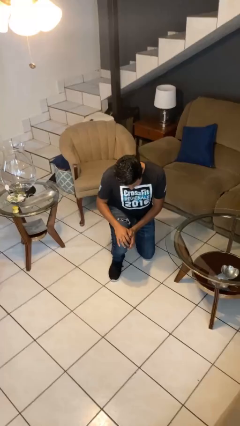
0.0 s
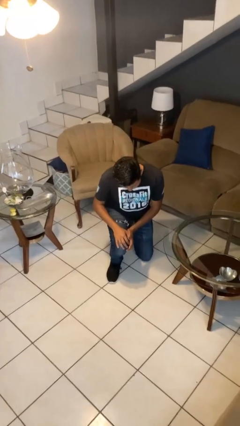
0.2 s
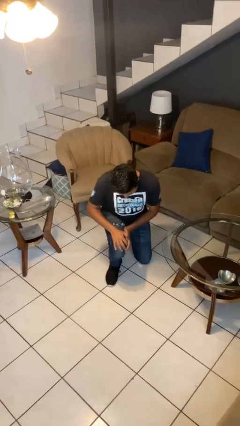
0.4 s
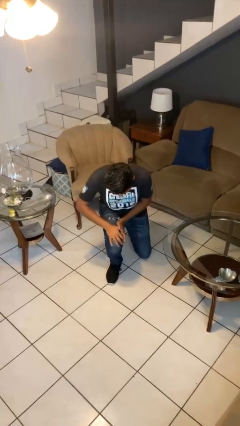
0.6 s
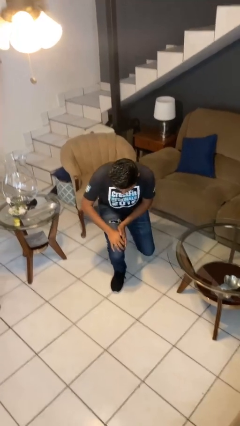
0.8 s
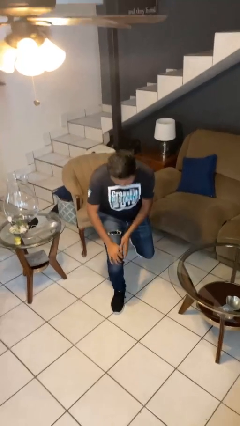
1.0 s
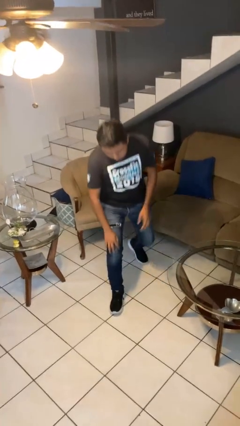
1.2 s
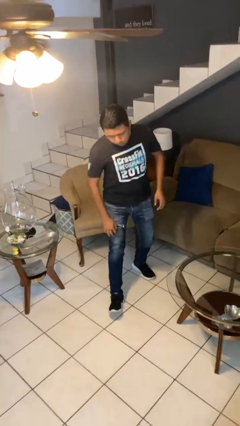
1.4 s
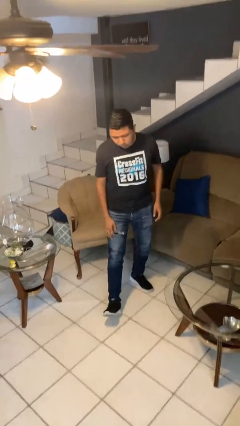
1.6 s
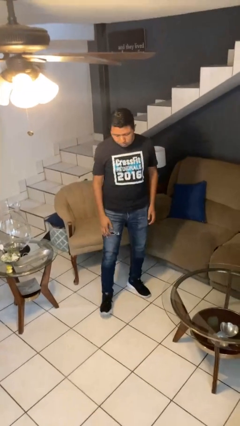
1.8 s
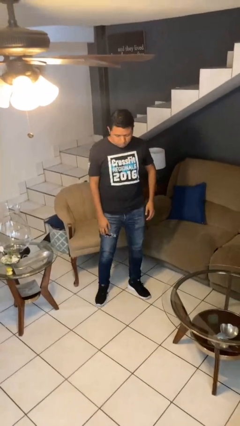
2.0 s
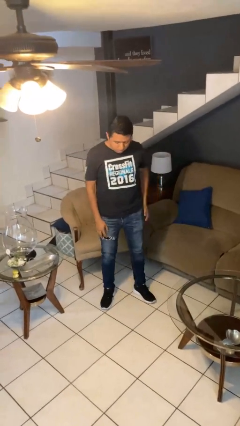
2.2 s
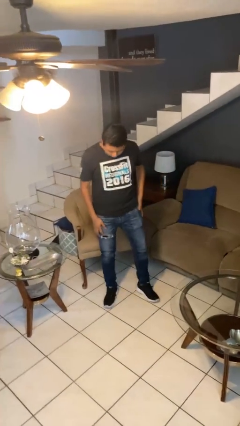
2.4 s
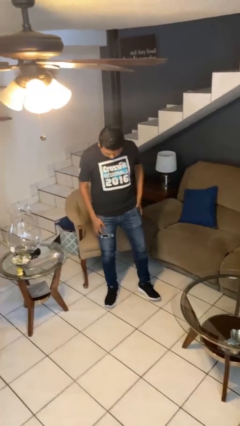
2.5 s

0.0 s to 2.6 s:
person stands up from floor

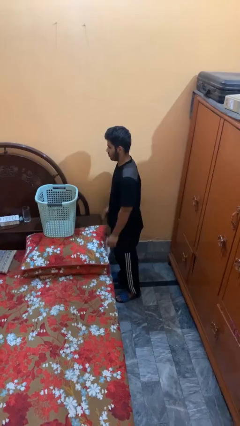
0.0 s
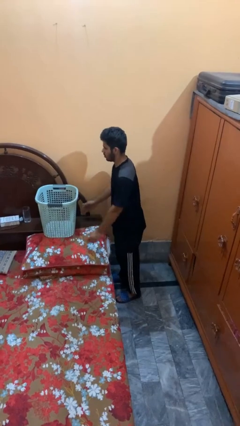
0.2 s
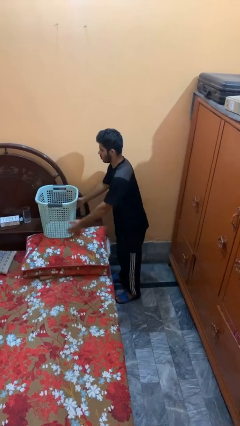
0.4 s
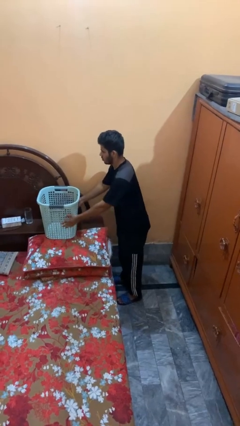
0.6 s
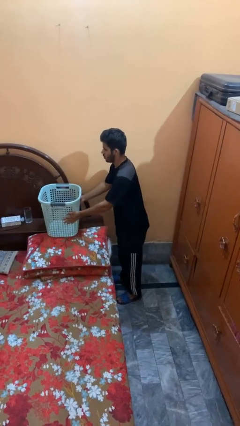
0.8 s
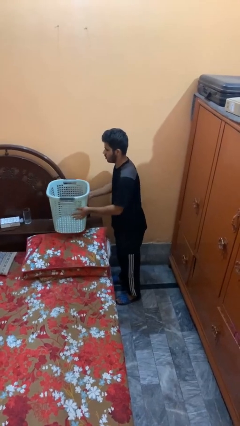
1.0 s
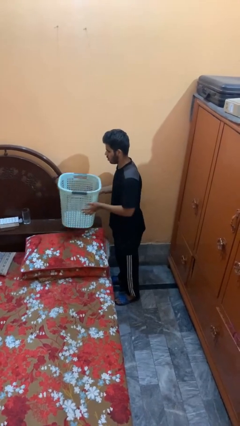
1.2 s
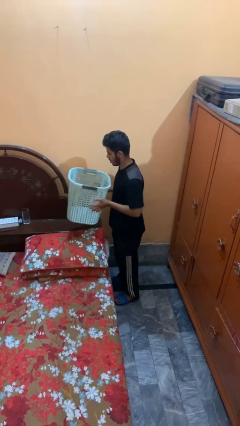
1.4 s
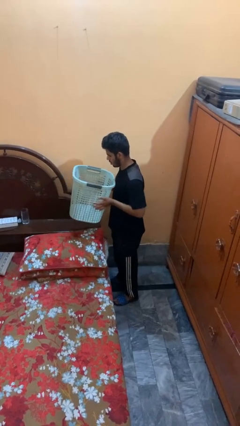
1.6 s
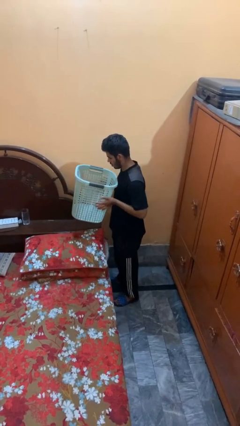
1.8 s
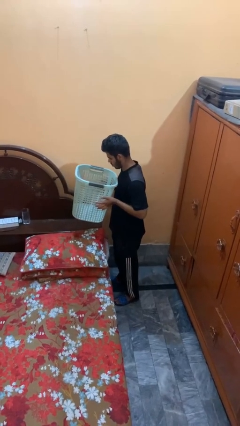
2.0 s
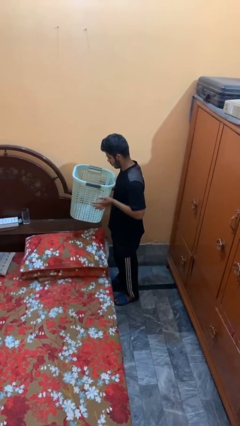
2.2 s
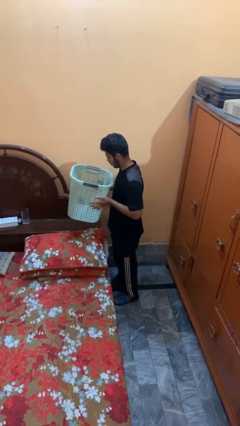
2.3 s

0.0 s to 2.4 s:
person picks up object from bed

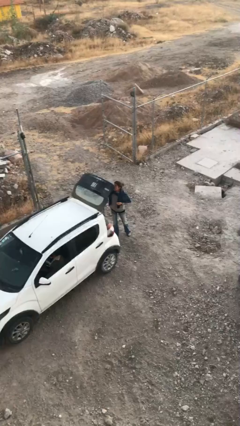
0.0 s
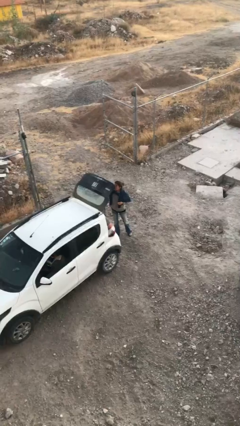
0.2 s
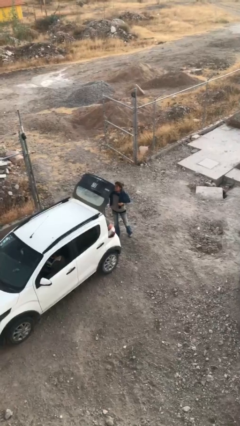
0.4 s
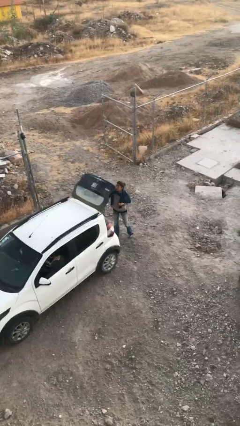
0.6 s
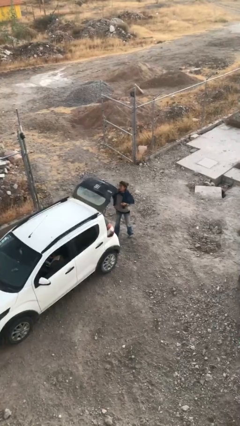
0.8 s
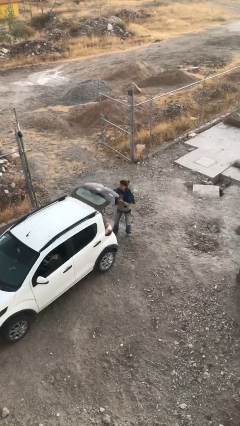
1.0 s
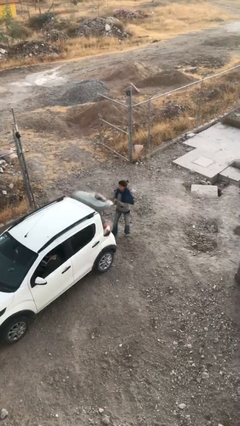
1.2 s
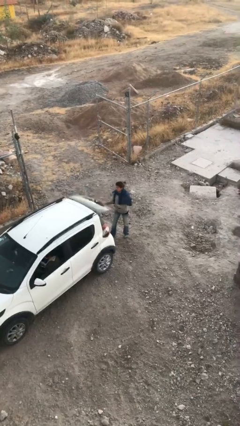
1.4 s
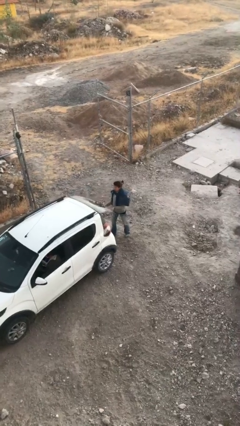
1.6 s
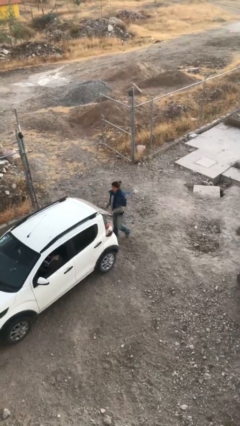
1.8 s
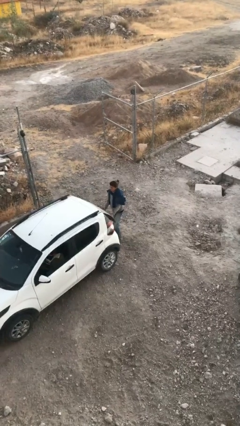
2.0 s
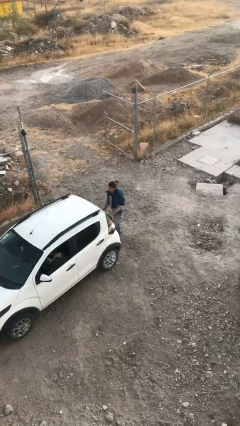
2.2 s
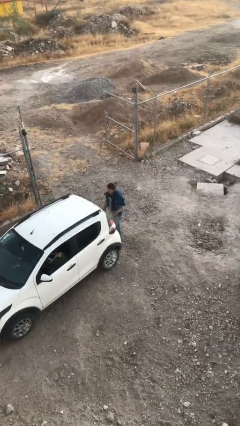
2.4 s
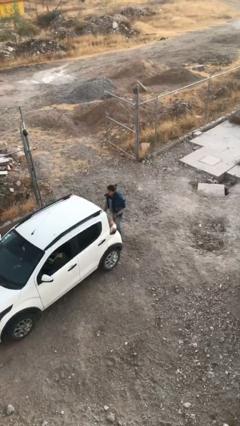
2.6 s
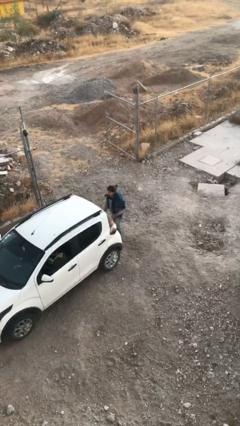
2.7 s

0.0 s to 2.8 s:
person closes car trunk

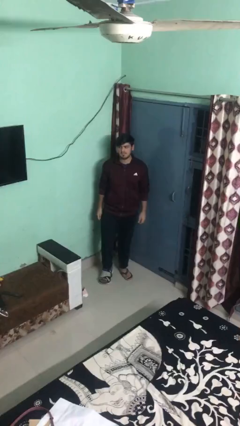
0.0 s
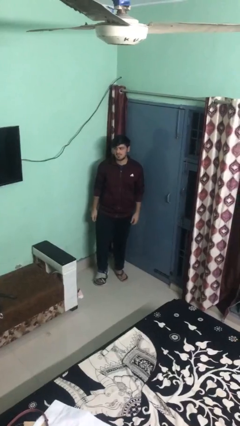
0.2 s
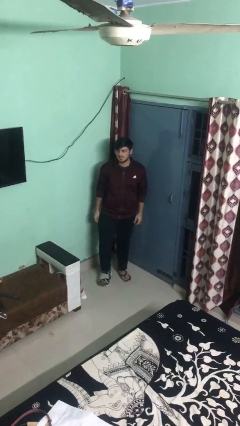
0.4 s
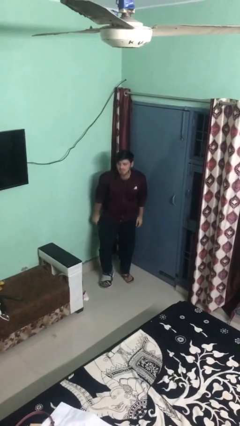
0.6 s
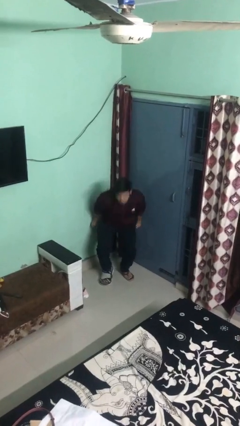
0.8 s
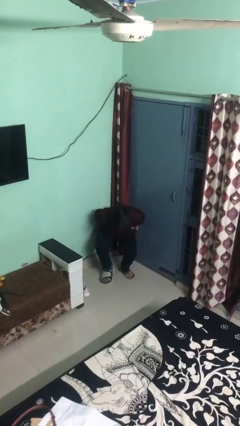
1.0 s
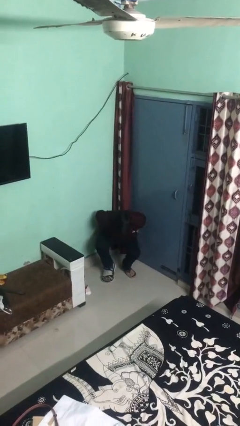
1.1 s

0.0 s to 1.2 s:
person sits down

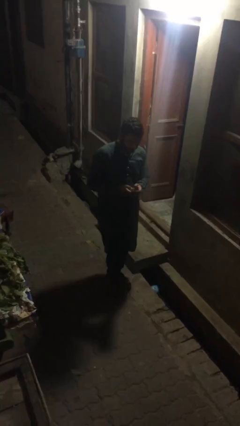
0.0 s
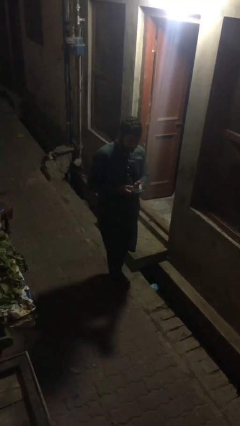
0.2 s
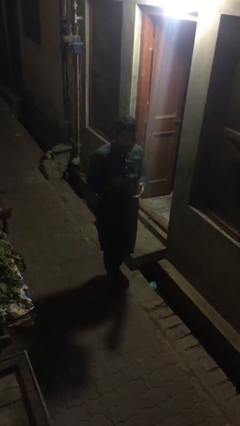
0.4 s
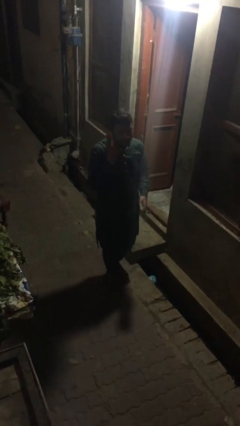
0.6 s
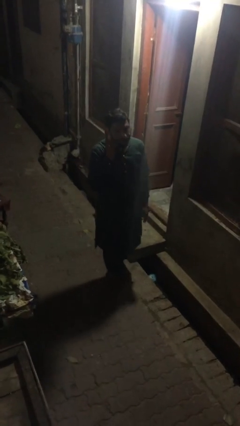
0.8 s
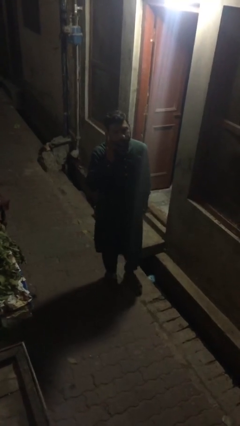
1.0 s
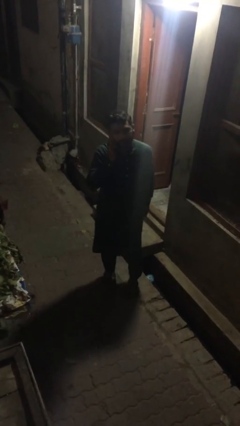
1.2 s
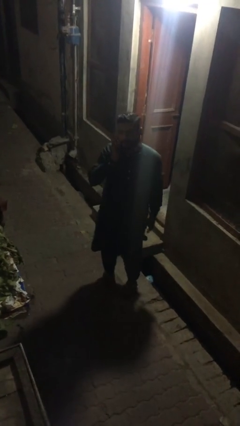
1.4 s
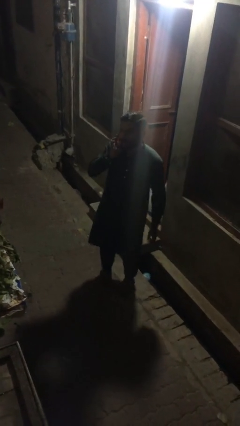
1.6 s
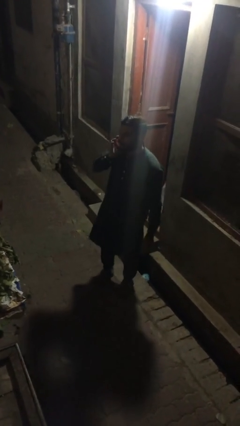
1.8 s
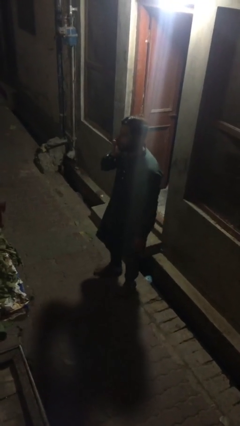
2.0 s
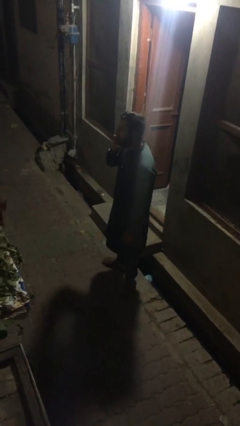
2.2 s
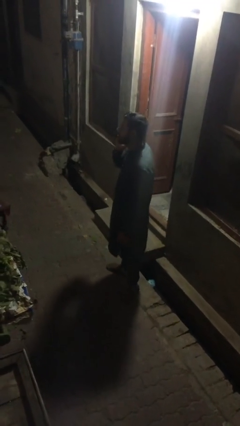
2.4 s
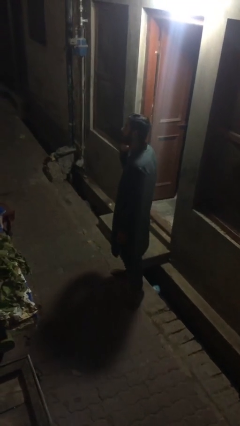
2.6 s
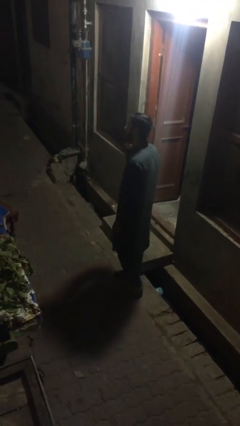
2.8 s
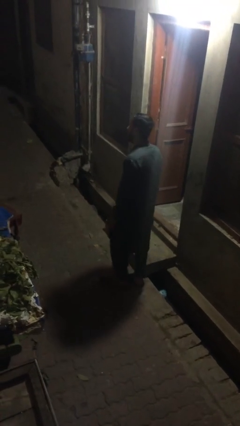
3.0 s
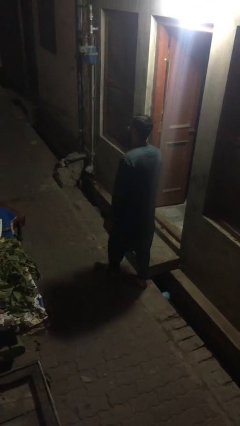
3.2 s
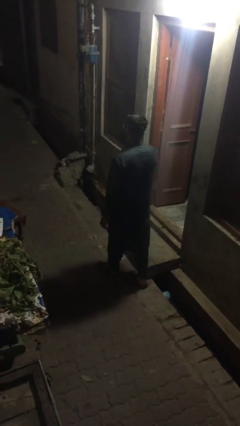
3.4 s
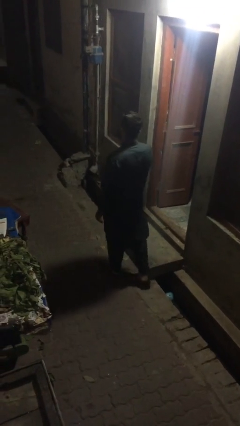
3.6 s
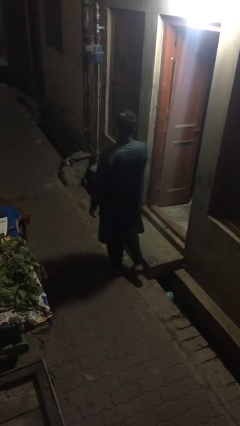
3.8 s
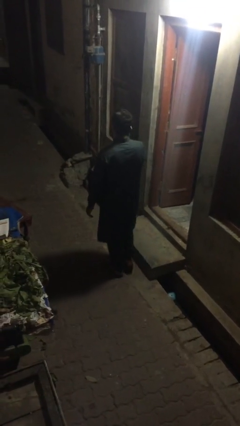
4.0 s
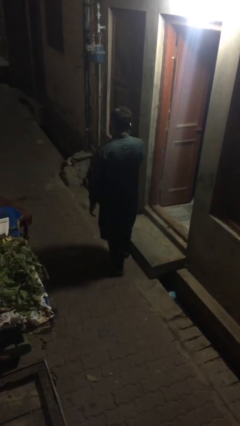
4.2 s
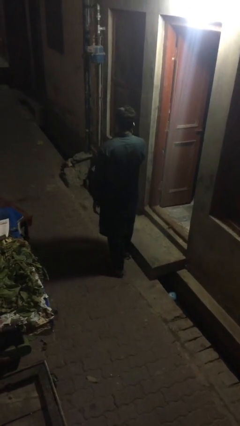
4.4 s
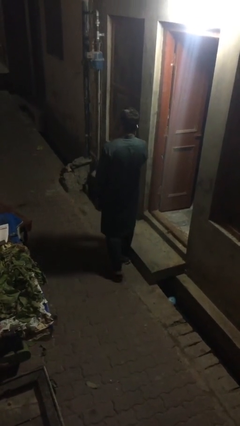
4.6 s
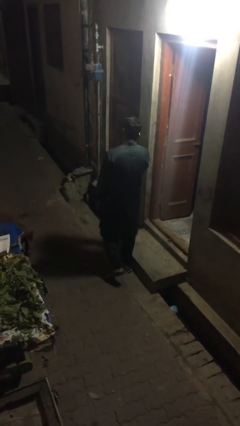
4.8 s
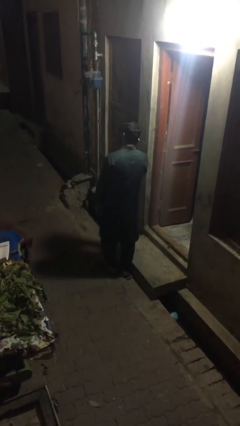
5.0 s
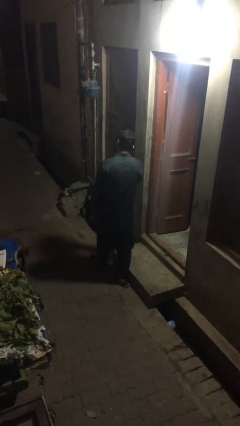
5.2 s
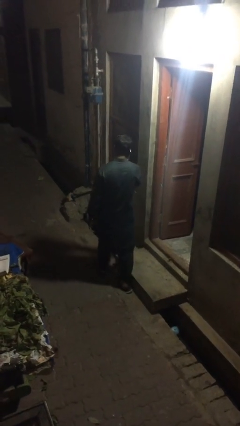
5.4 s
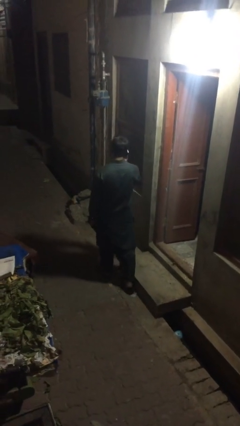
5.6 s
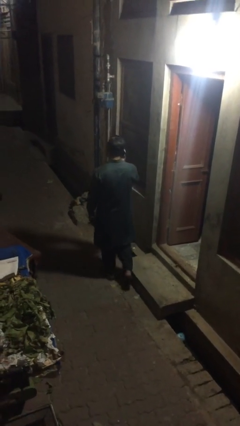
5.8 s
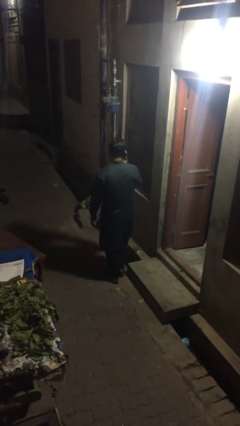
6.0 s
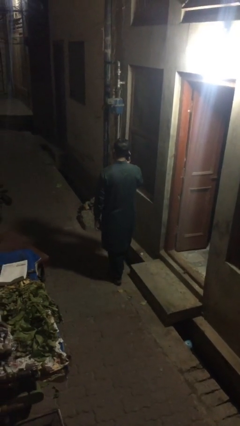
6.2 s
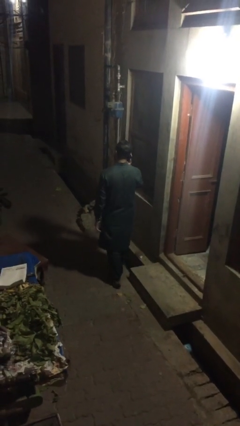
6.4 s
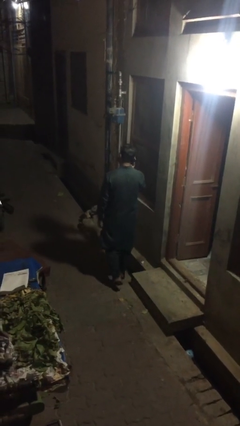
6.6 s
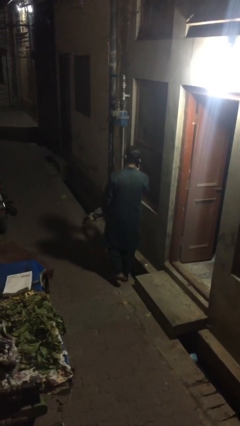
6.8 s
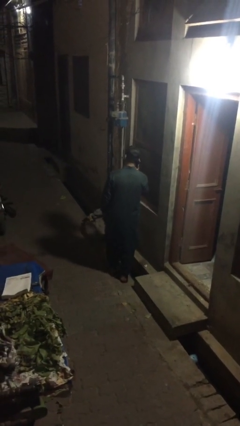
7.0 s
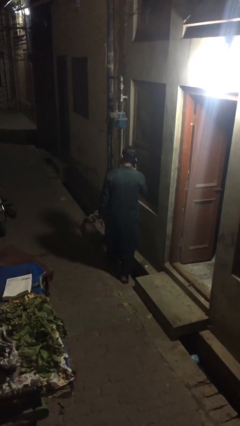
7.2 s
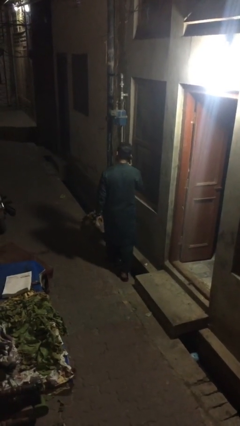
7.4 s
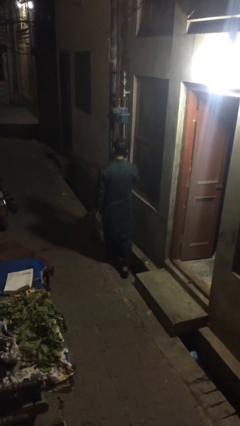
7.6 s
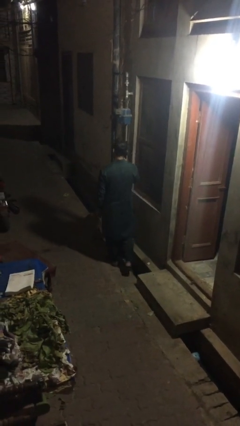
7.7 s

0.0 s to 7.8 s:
person talks on phone

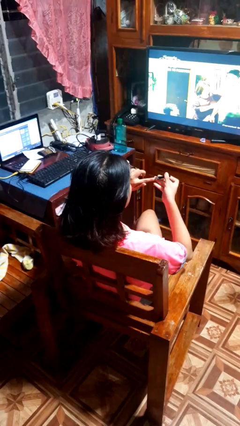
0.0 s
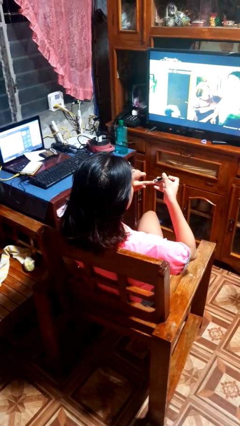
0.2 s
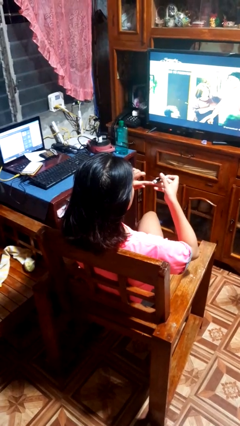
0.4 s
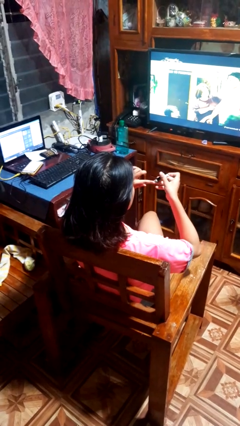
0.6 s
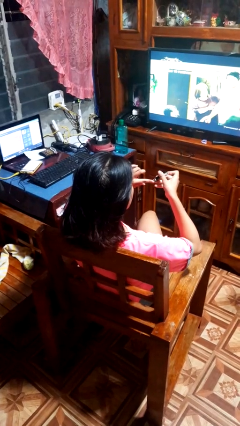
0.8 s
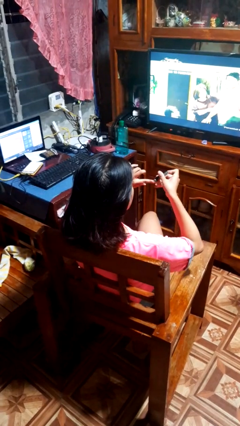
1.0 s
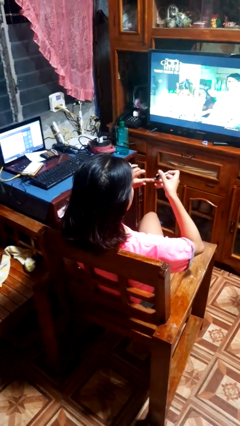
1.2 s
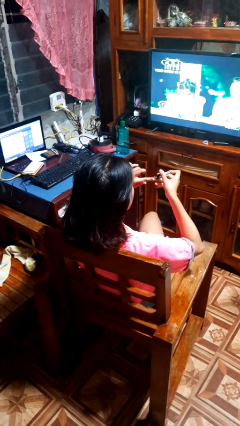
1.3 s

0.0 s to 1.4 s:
person clips fingernails
